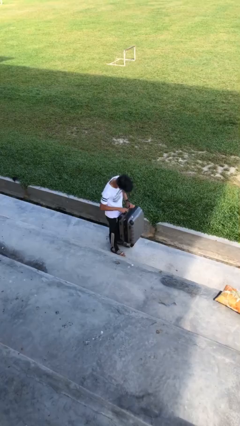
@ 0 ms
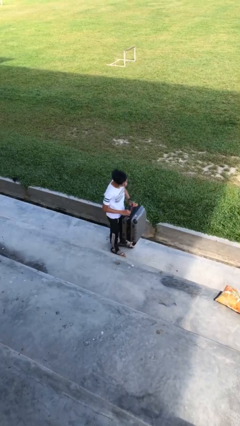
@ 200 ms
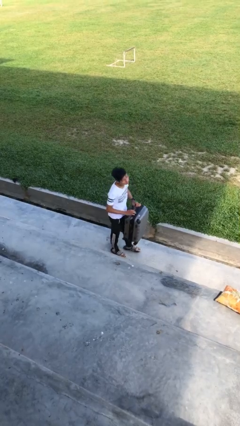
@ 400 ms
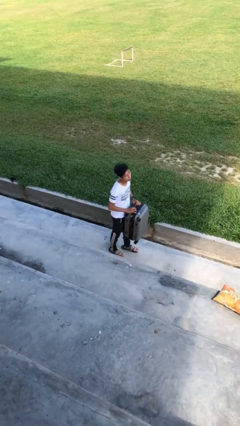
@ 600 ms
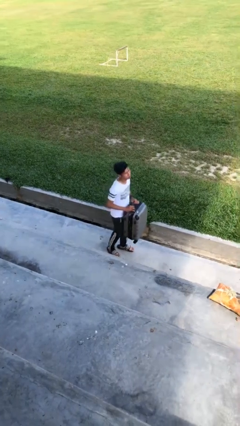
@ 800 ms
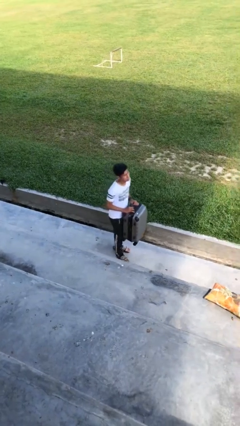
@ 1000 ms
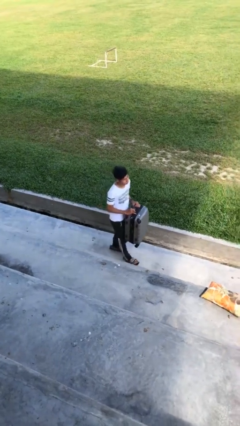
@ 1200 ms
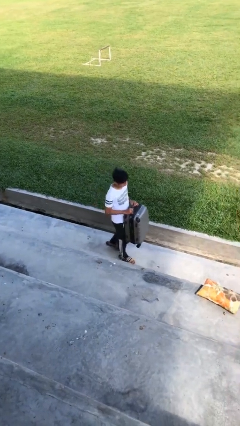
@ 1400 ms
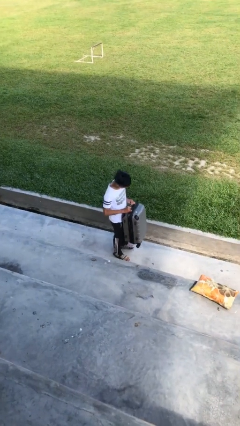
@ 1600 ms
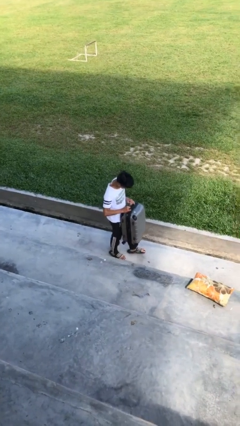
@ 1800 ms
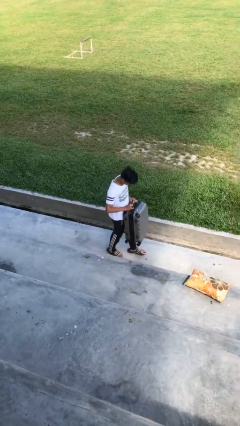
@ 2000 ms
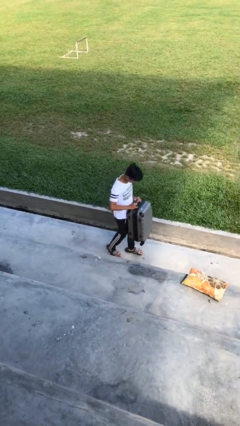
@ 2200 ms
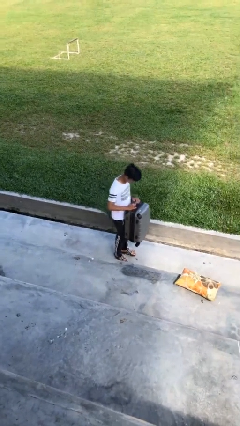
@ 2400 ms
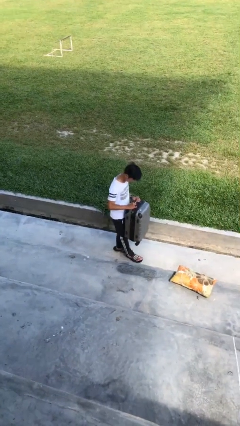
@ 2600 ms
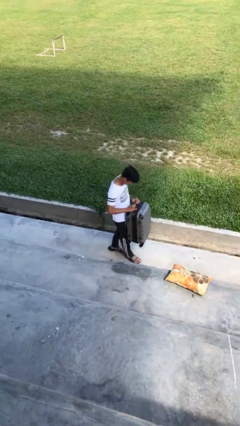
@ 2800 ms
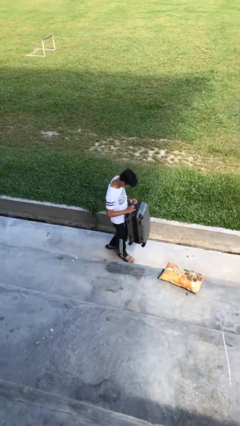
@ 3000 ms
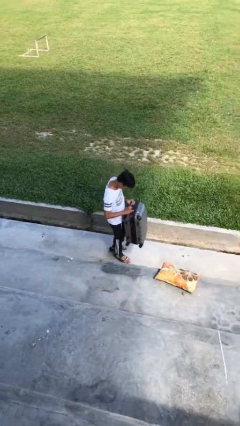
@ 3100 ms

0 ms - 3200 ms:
person carries heavy object

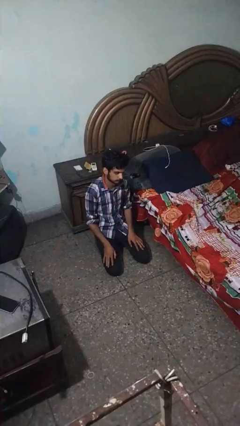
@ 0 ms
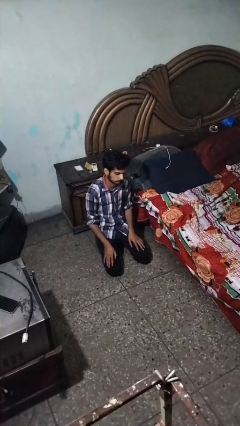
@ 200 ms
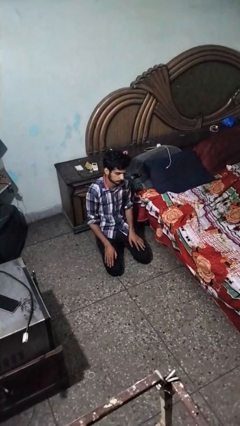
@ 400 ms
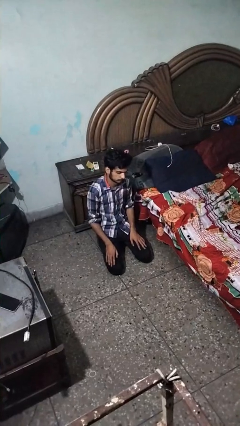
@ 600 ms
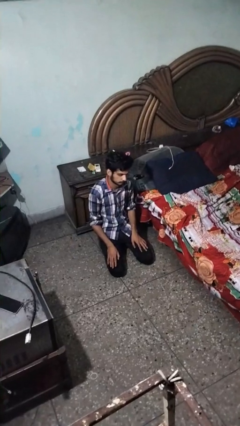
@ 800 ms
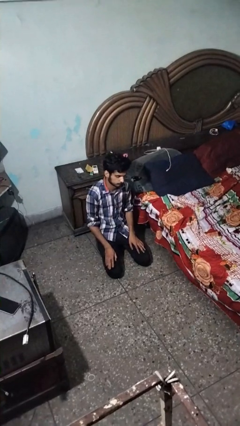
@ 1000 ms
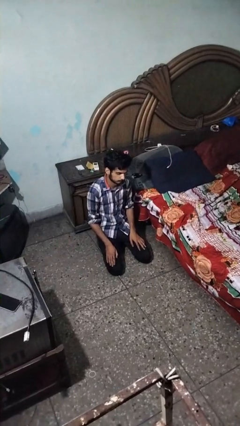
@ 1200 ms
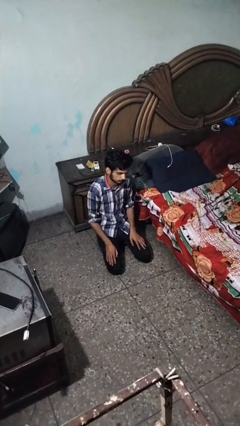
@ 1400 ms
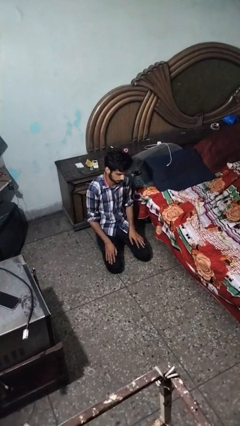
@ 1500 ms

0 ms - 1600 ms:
person searches under bed

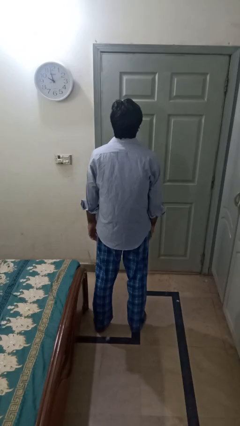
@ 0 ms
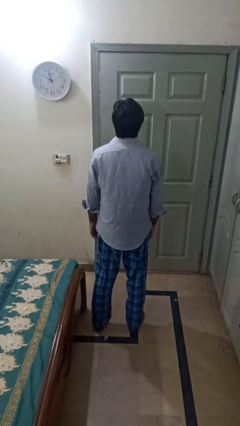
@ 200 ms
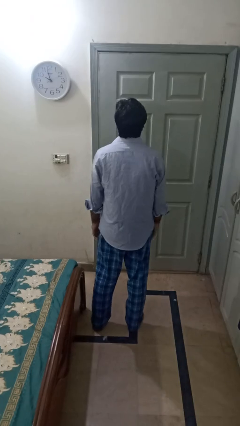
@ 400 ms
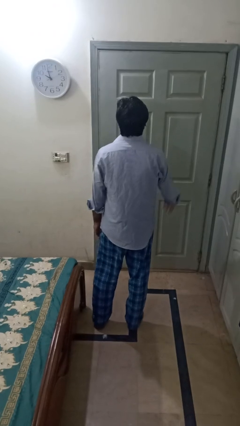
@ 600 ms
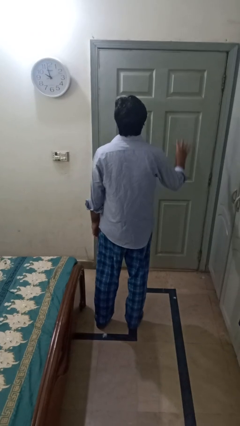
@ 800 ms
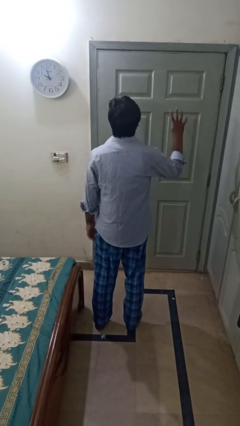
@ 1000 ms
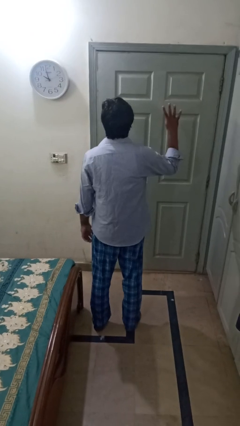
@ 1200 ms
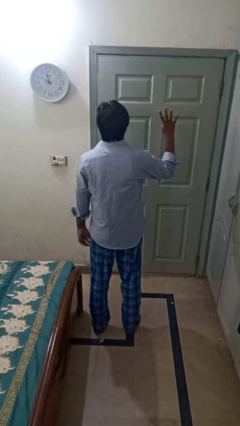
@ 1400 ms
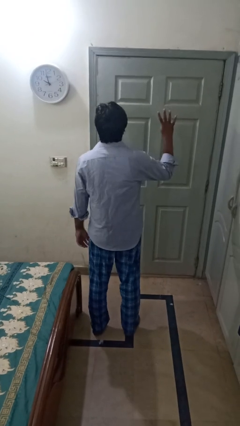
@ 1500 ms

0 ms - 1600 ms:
person gestures number four

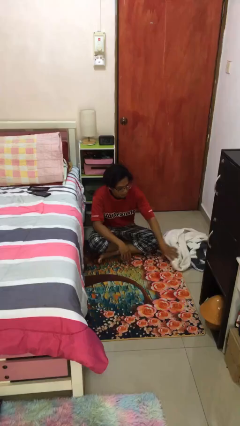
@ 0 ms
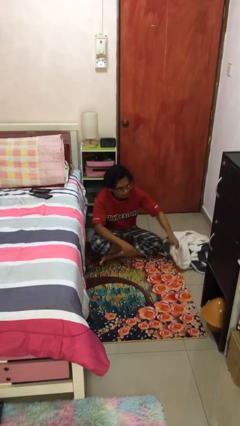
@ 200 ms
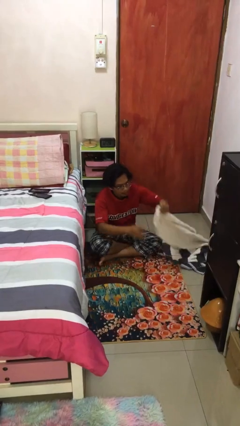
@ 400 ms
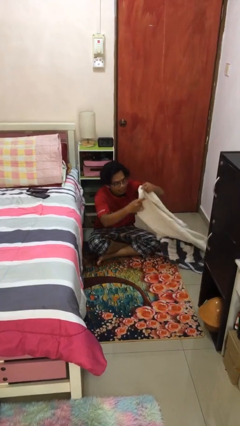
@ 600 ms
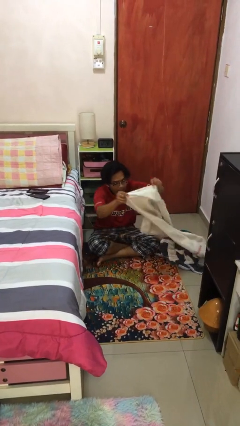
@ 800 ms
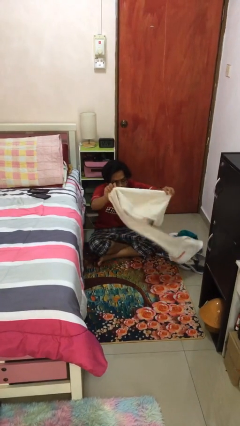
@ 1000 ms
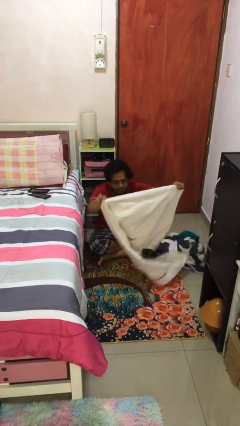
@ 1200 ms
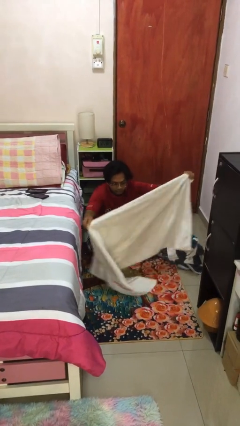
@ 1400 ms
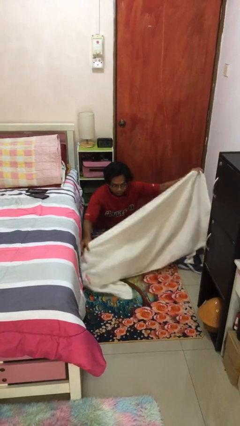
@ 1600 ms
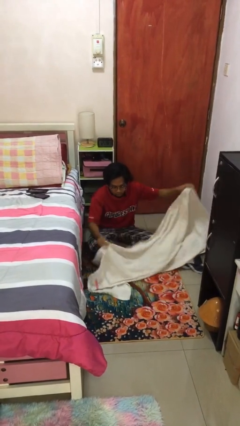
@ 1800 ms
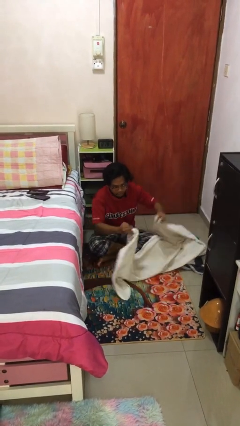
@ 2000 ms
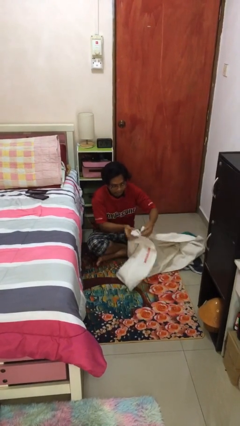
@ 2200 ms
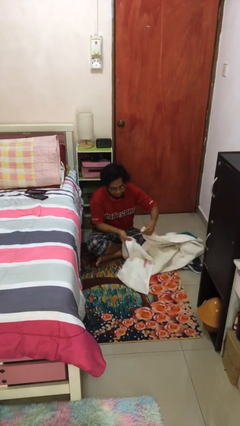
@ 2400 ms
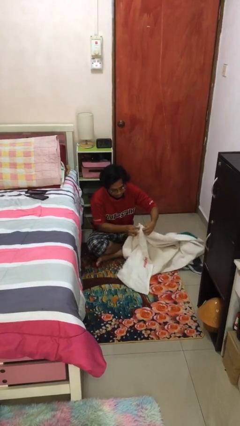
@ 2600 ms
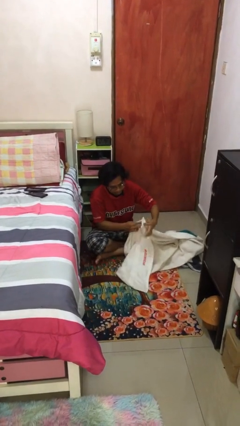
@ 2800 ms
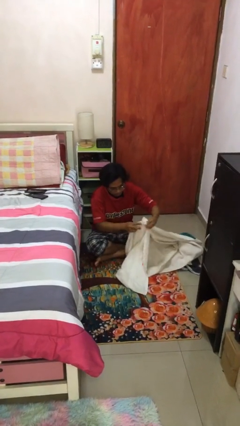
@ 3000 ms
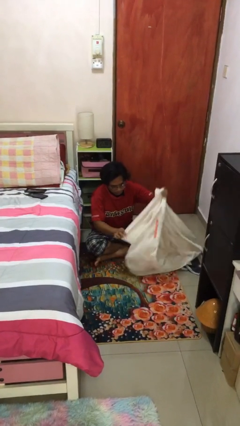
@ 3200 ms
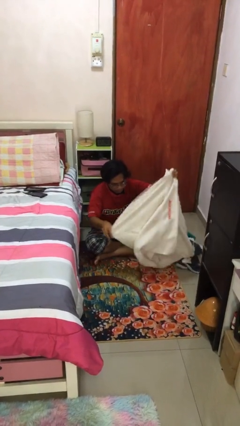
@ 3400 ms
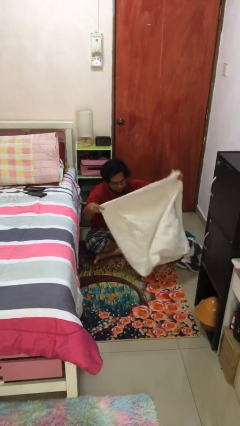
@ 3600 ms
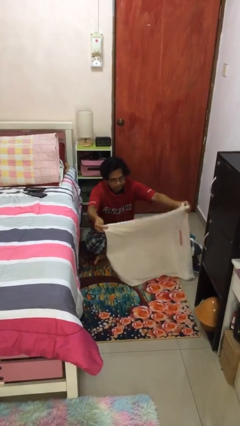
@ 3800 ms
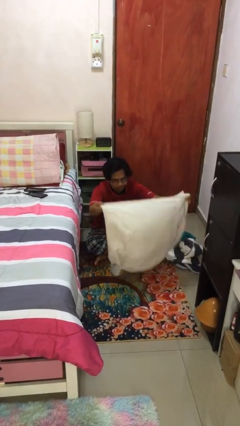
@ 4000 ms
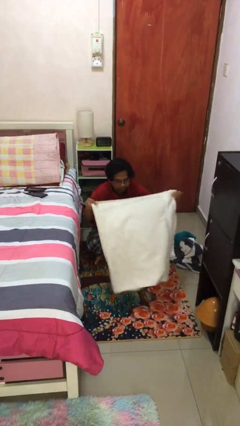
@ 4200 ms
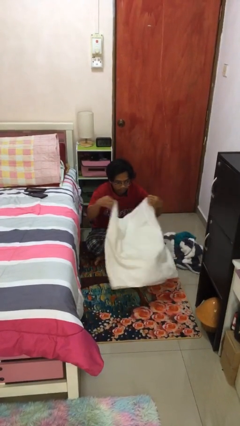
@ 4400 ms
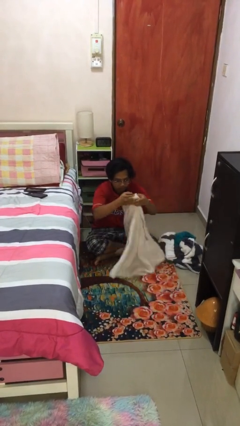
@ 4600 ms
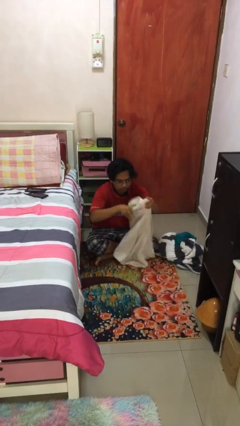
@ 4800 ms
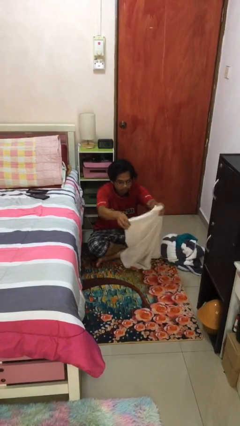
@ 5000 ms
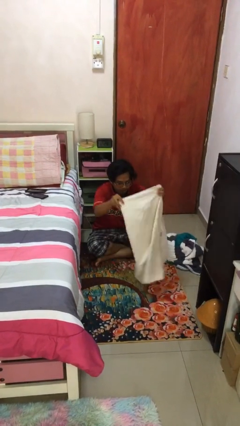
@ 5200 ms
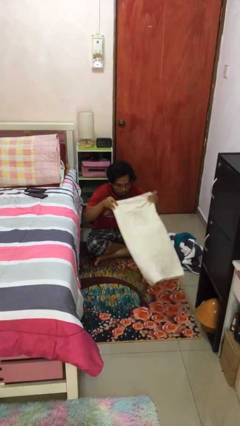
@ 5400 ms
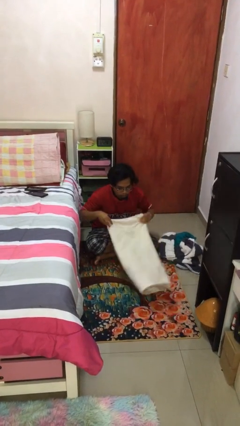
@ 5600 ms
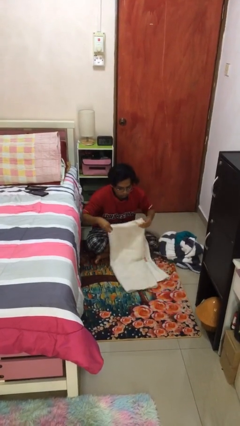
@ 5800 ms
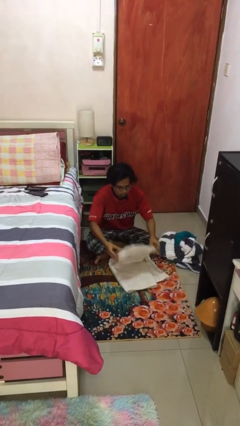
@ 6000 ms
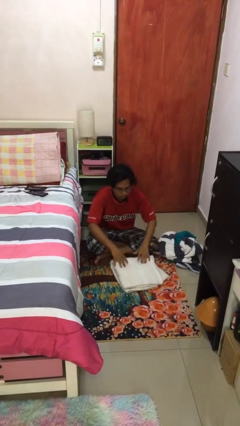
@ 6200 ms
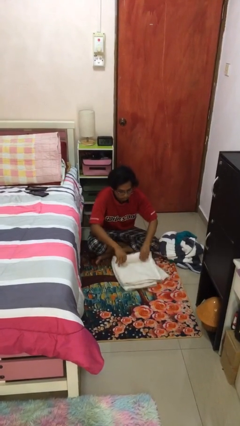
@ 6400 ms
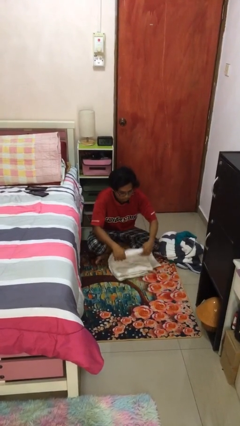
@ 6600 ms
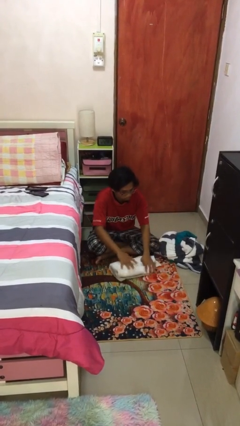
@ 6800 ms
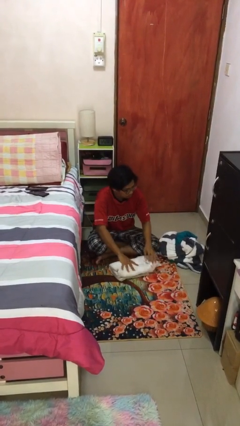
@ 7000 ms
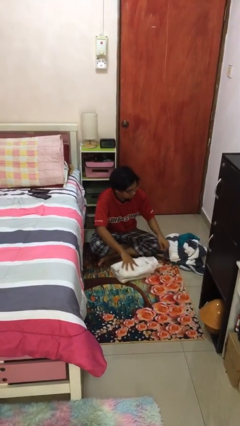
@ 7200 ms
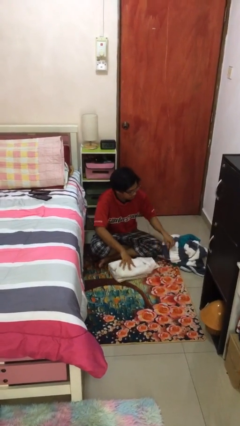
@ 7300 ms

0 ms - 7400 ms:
person folds towel

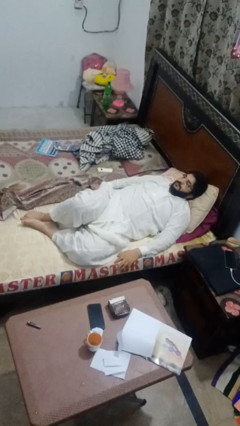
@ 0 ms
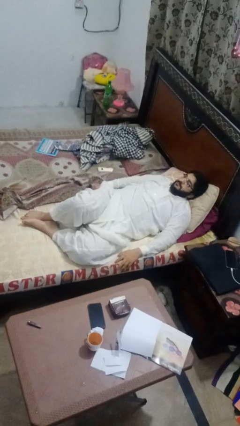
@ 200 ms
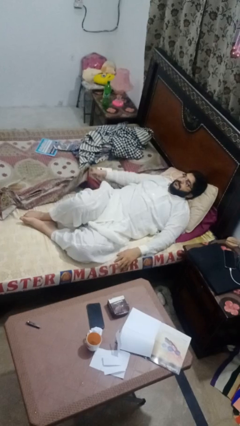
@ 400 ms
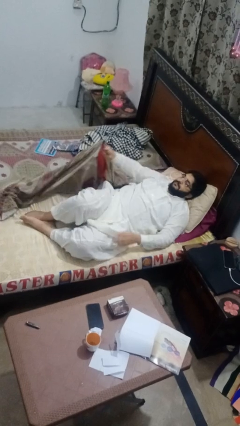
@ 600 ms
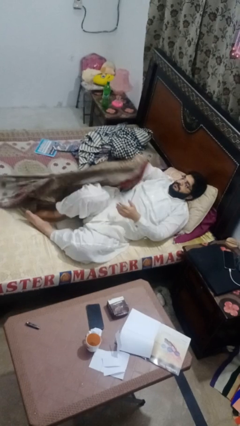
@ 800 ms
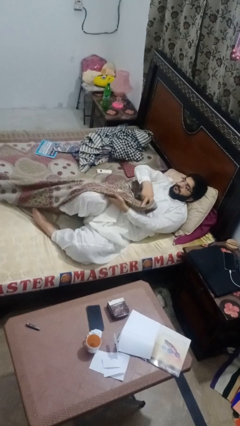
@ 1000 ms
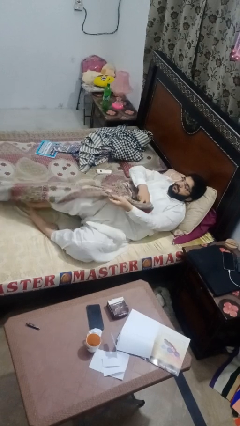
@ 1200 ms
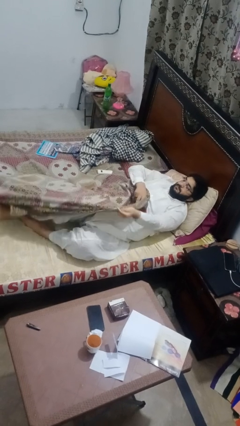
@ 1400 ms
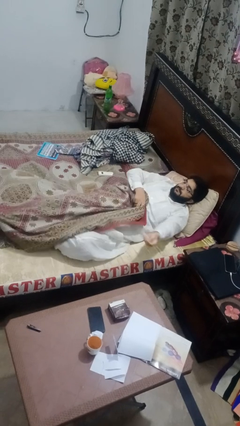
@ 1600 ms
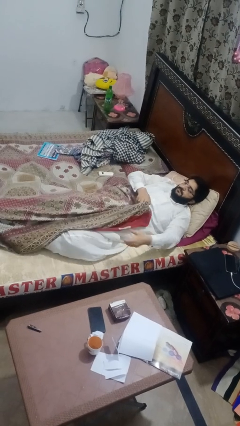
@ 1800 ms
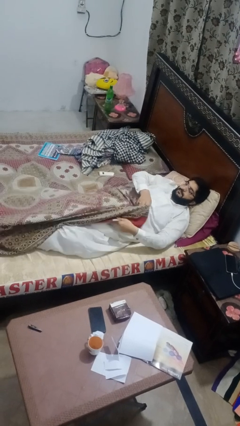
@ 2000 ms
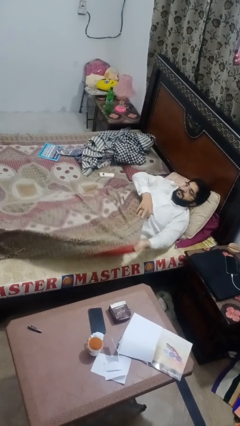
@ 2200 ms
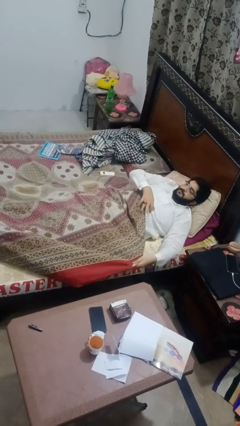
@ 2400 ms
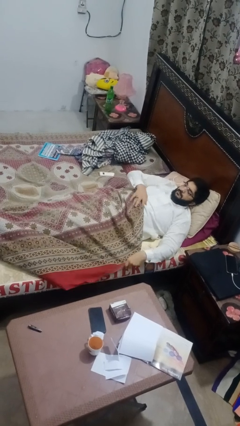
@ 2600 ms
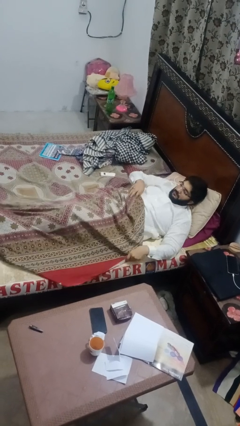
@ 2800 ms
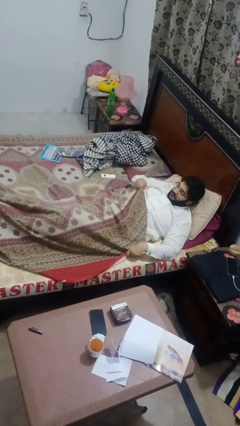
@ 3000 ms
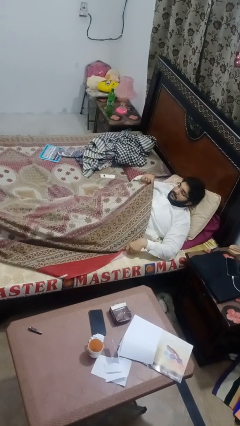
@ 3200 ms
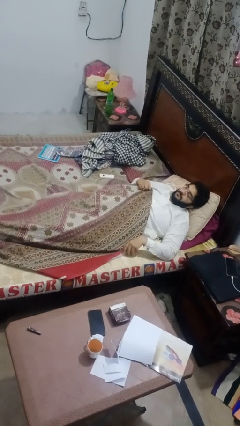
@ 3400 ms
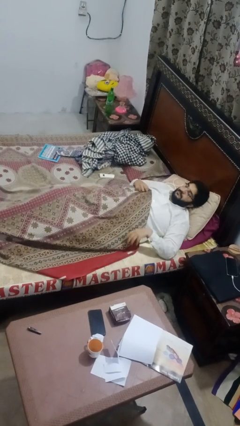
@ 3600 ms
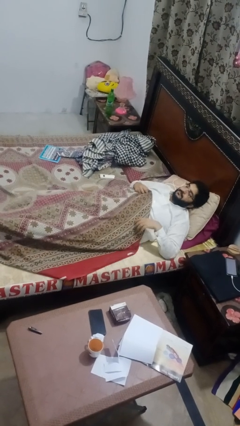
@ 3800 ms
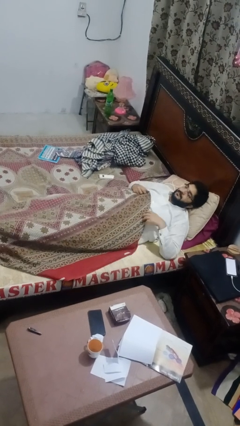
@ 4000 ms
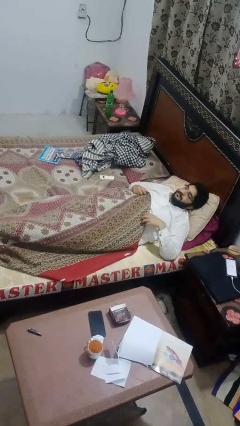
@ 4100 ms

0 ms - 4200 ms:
person covers with bedsheets
